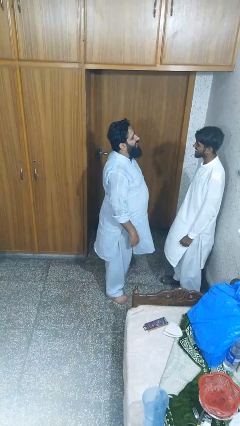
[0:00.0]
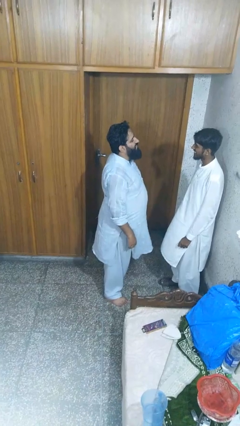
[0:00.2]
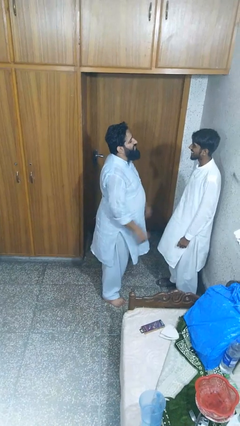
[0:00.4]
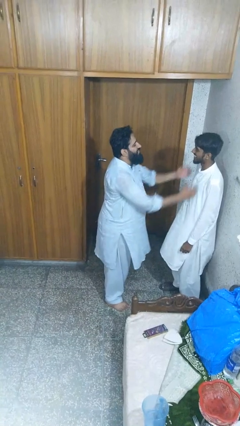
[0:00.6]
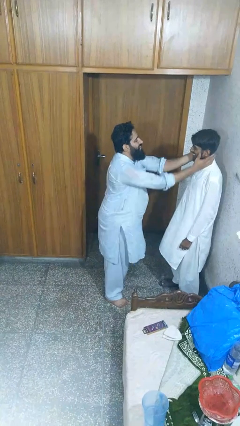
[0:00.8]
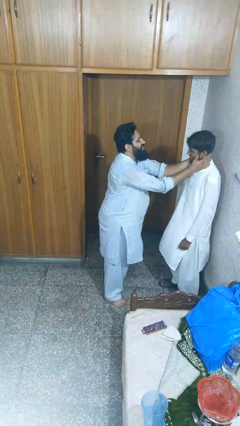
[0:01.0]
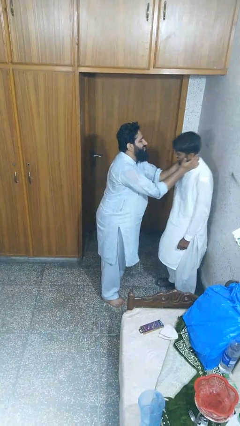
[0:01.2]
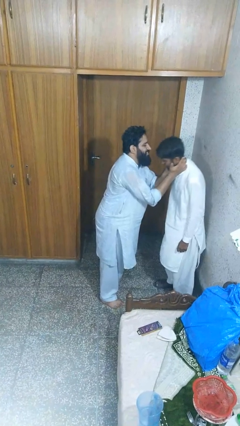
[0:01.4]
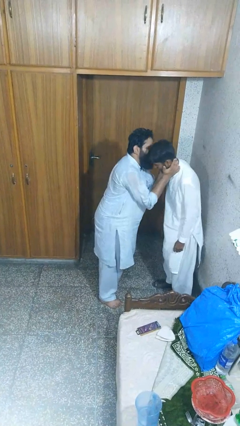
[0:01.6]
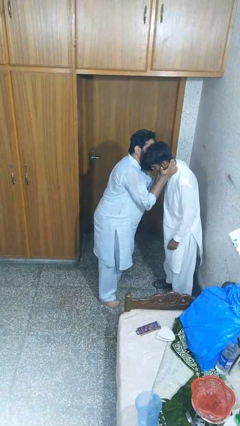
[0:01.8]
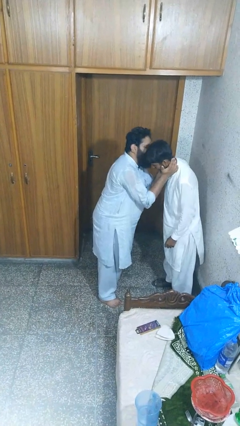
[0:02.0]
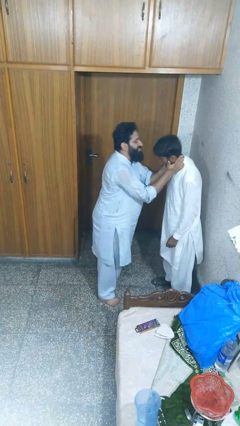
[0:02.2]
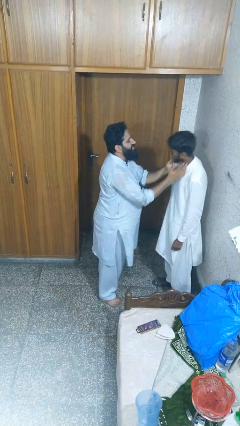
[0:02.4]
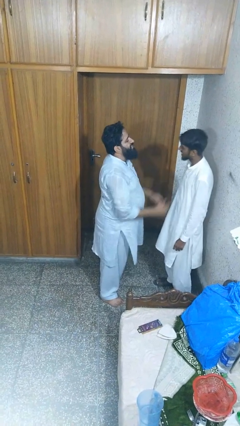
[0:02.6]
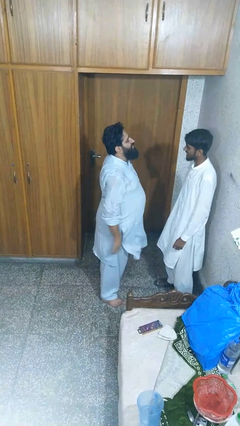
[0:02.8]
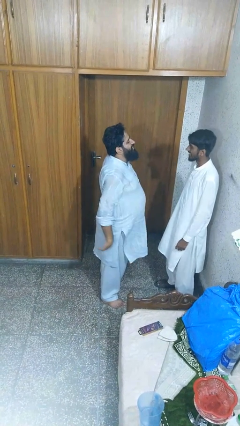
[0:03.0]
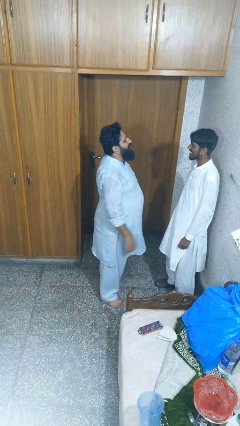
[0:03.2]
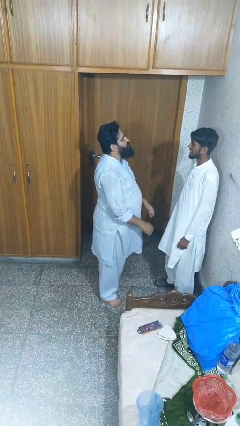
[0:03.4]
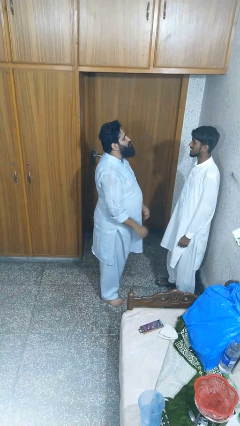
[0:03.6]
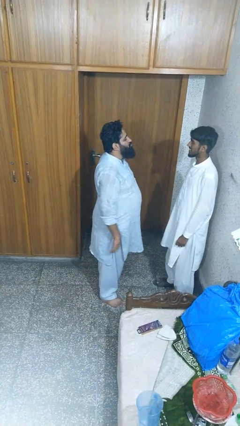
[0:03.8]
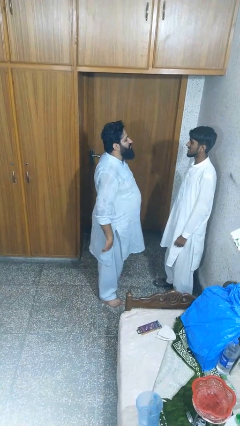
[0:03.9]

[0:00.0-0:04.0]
person kisses cheek of person

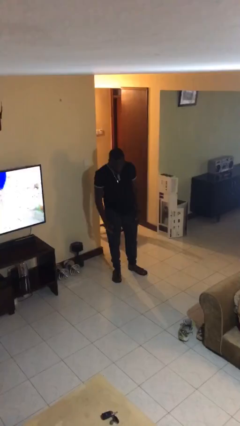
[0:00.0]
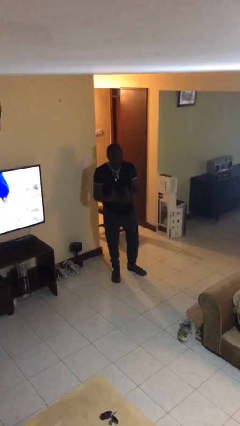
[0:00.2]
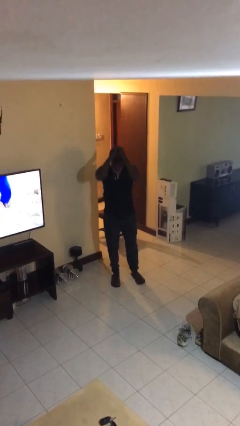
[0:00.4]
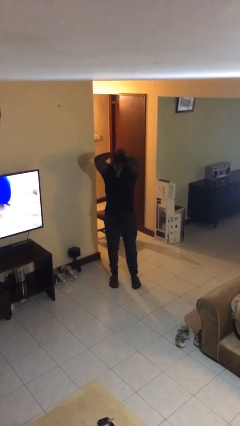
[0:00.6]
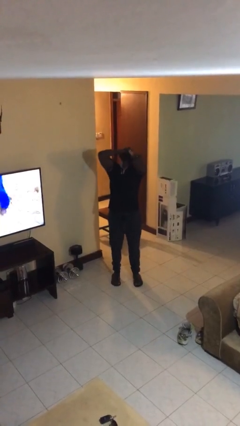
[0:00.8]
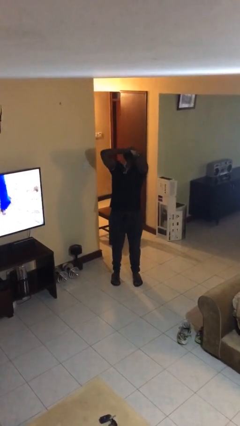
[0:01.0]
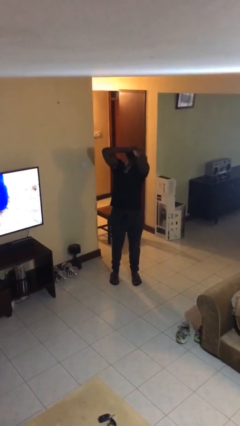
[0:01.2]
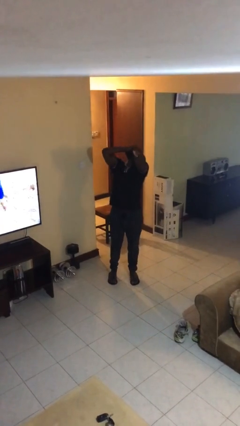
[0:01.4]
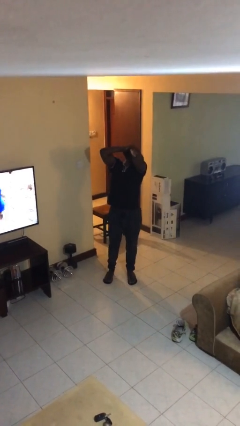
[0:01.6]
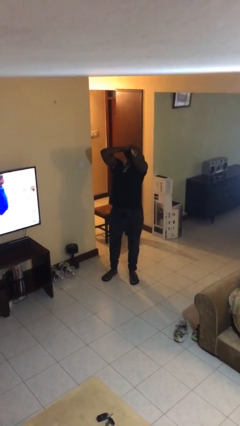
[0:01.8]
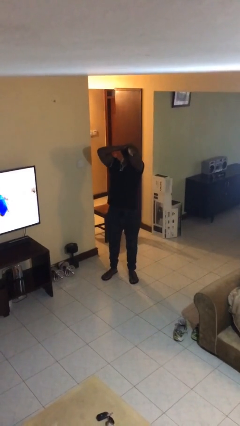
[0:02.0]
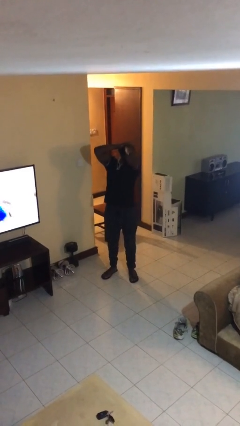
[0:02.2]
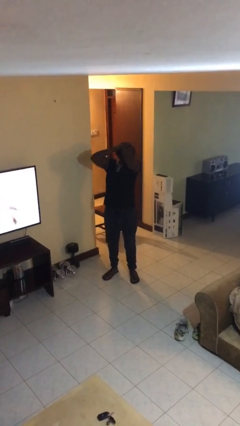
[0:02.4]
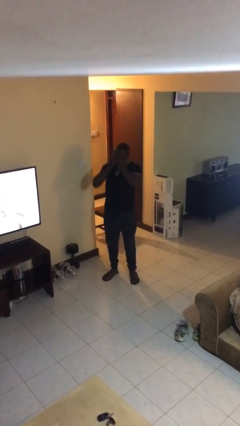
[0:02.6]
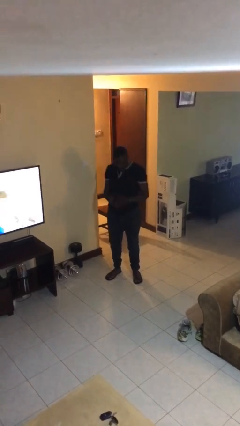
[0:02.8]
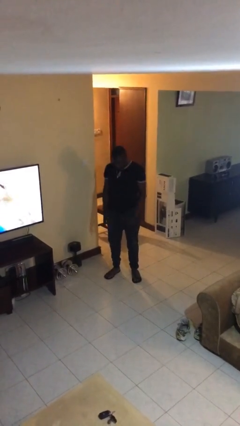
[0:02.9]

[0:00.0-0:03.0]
person covers face with hands

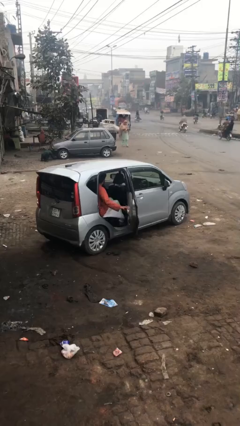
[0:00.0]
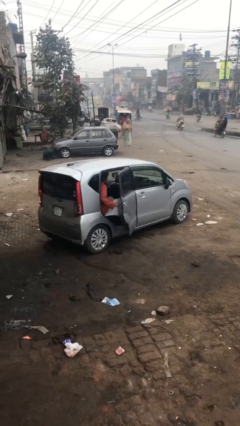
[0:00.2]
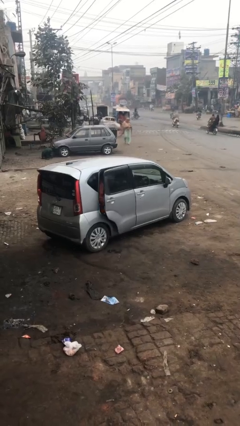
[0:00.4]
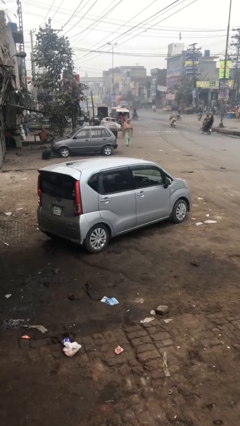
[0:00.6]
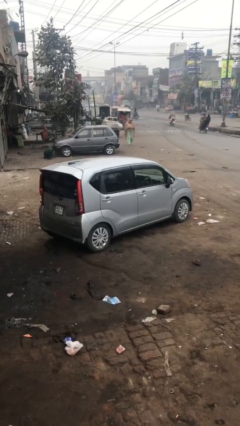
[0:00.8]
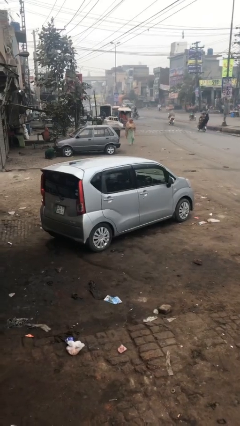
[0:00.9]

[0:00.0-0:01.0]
person closes car door

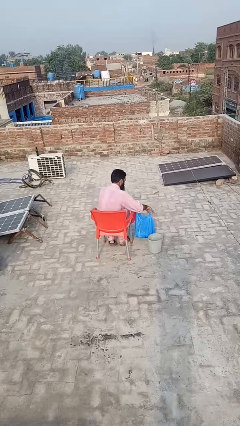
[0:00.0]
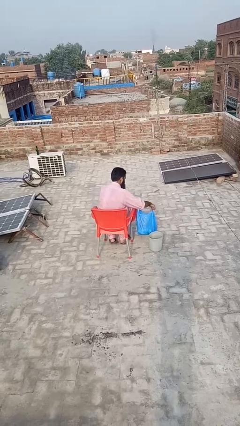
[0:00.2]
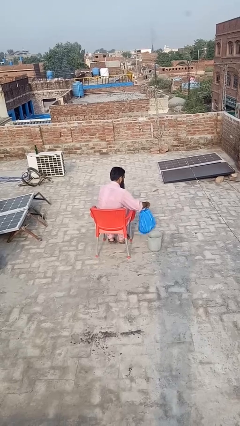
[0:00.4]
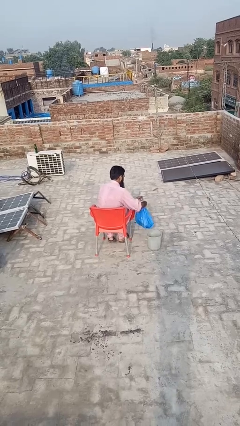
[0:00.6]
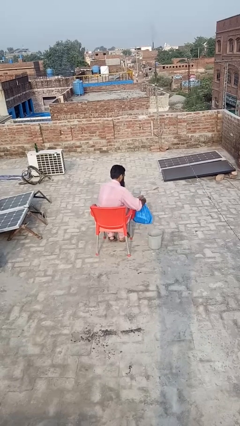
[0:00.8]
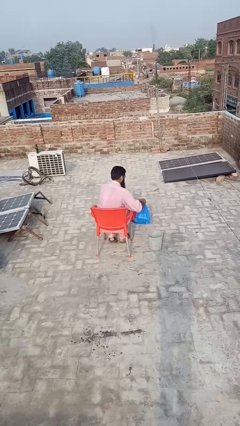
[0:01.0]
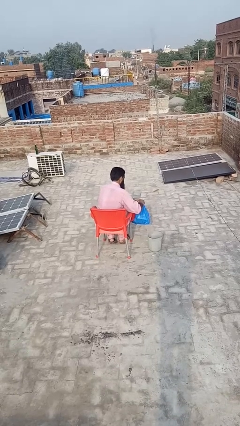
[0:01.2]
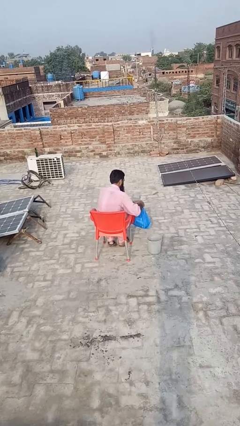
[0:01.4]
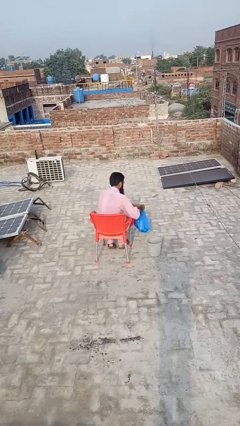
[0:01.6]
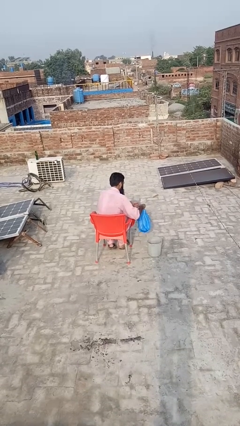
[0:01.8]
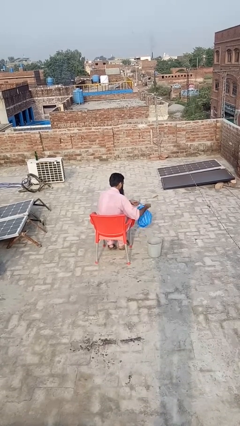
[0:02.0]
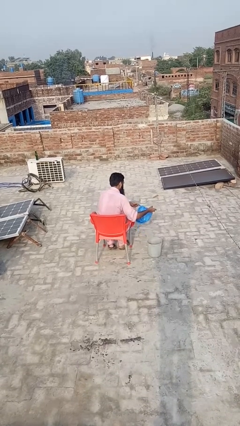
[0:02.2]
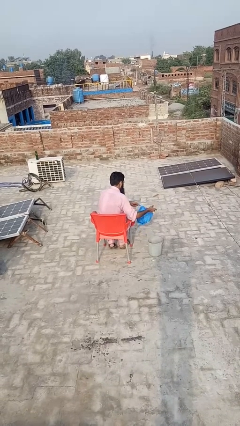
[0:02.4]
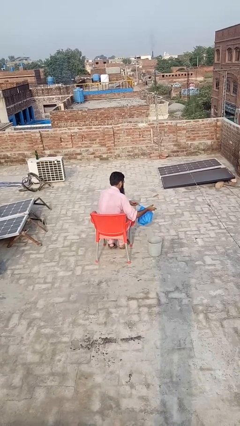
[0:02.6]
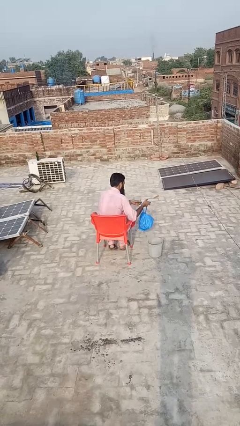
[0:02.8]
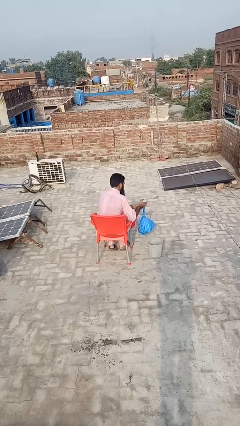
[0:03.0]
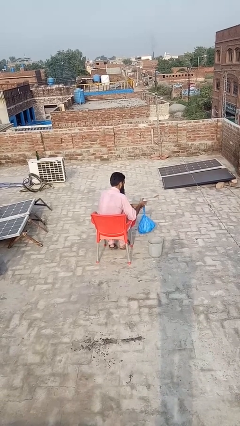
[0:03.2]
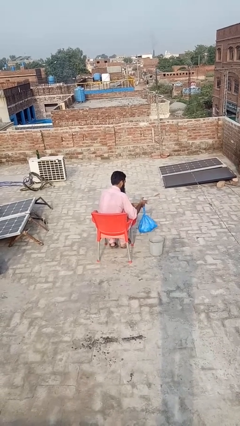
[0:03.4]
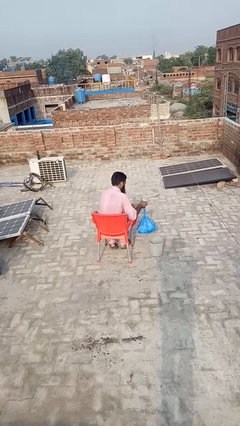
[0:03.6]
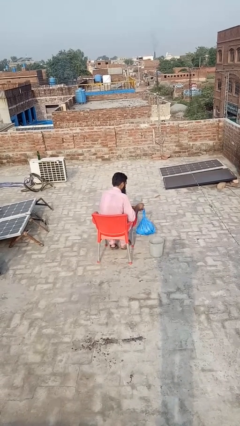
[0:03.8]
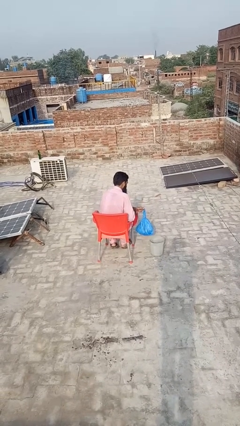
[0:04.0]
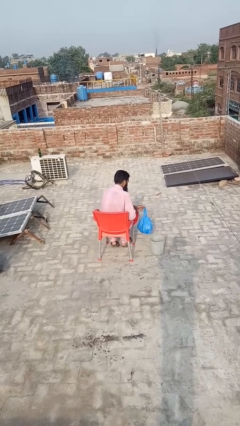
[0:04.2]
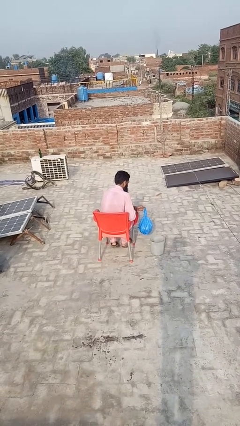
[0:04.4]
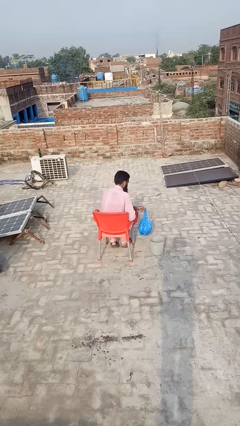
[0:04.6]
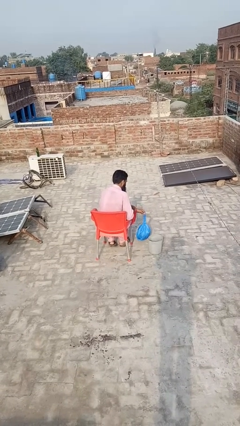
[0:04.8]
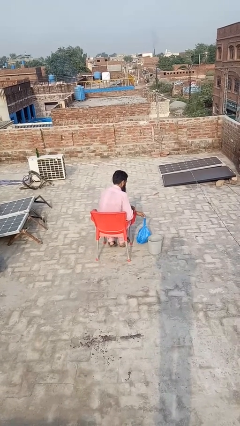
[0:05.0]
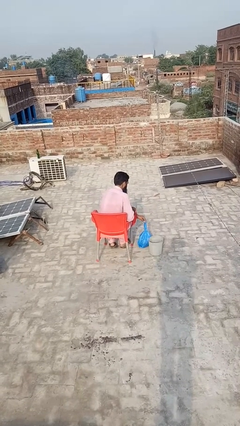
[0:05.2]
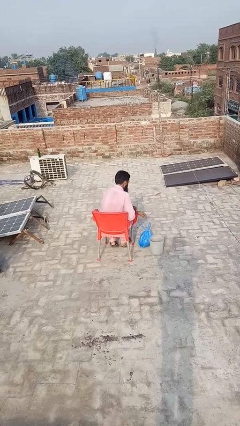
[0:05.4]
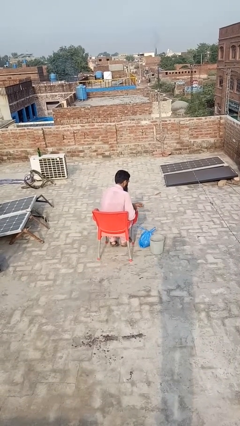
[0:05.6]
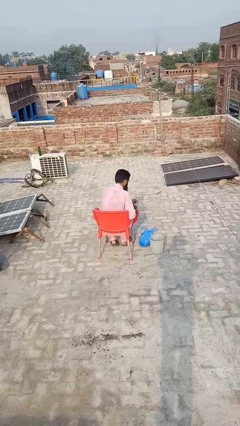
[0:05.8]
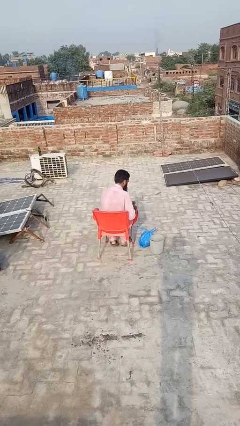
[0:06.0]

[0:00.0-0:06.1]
person inserts trashbag into trashcan

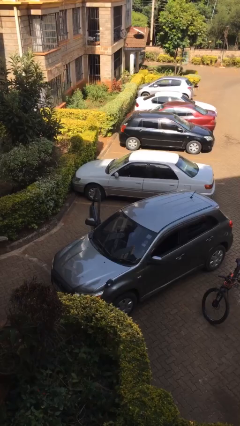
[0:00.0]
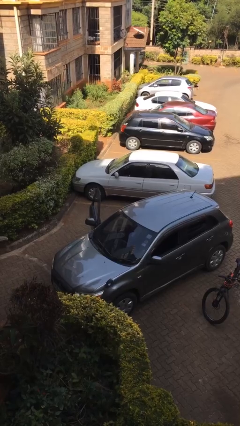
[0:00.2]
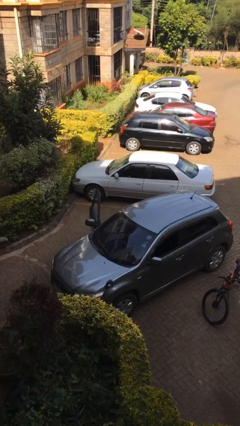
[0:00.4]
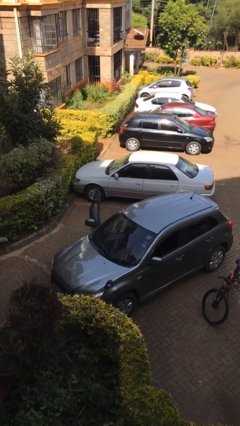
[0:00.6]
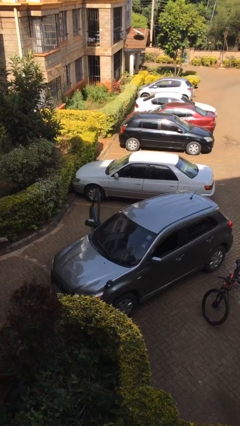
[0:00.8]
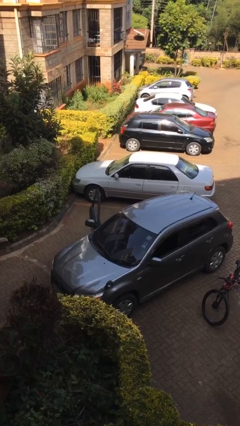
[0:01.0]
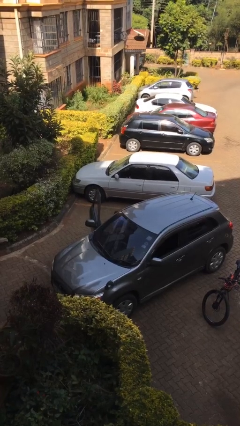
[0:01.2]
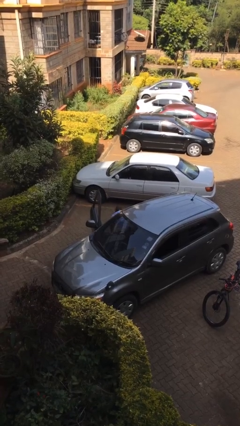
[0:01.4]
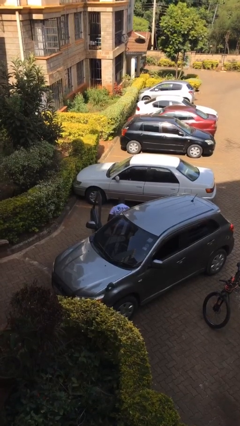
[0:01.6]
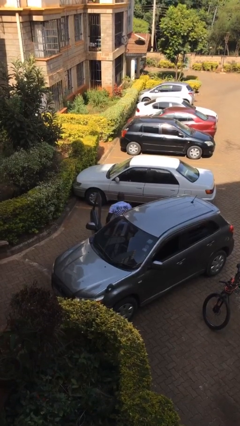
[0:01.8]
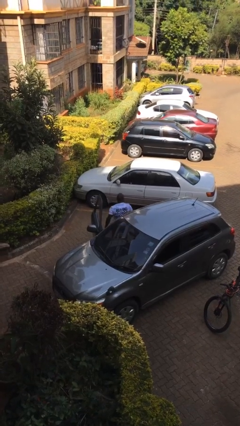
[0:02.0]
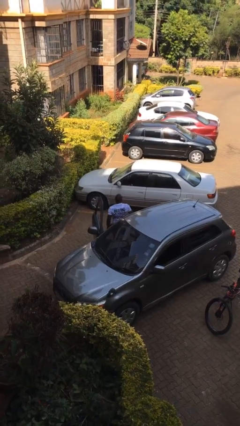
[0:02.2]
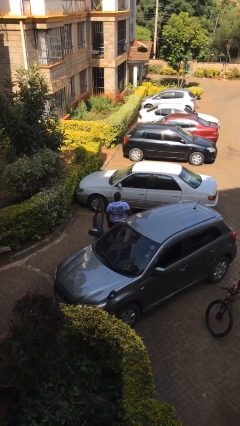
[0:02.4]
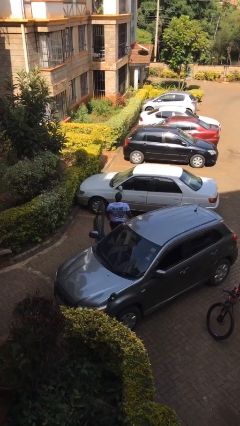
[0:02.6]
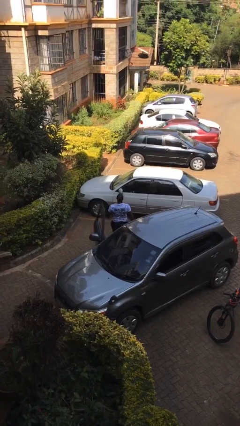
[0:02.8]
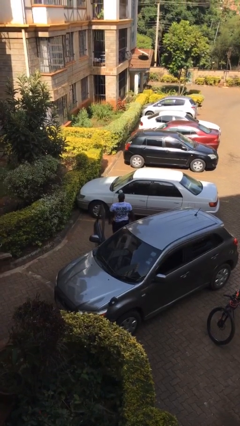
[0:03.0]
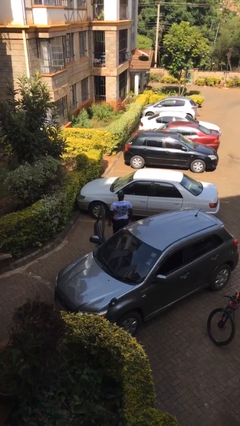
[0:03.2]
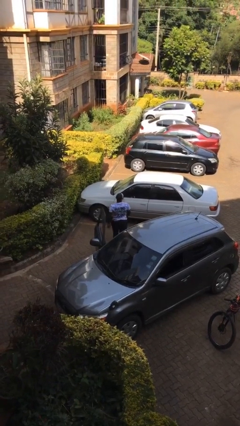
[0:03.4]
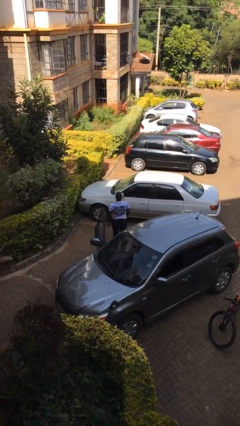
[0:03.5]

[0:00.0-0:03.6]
person exits car
